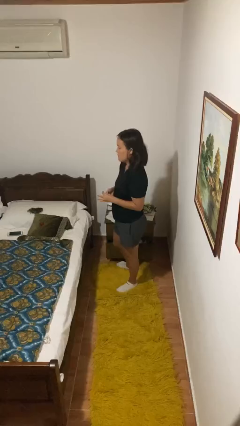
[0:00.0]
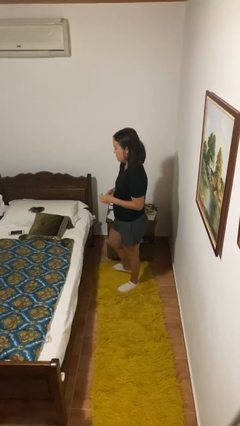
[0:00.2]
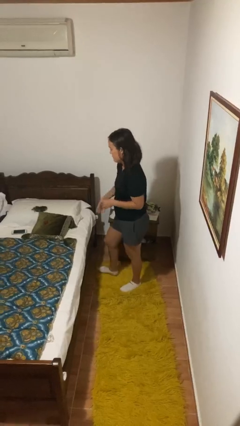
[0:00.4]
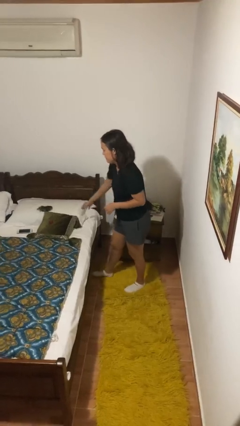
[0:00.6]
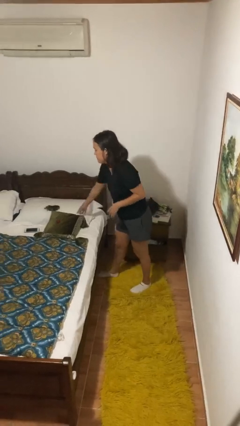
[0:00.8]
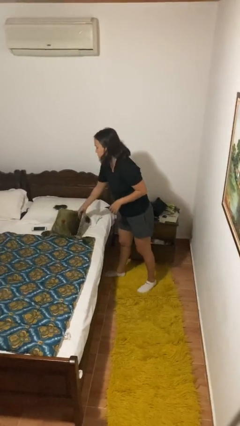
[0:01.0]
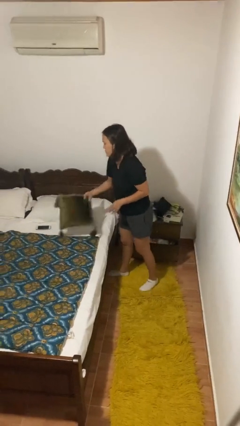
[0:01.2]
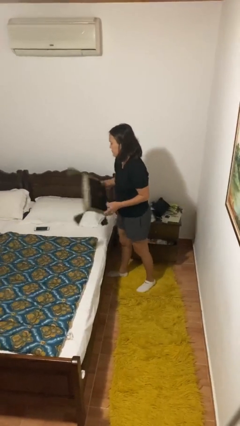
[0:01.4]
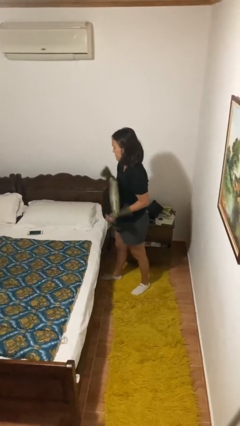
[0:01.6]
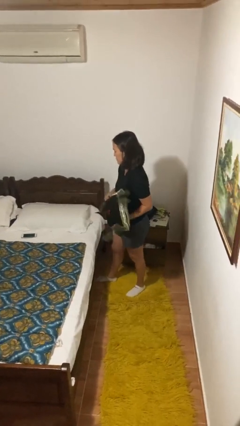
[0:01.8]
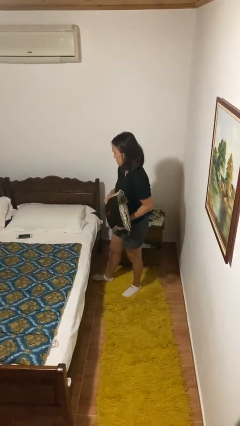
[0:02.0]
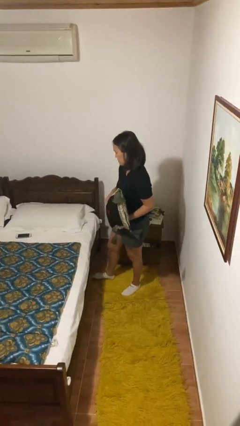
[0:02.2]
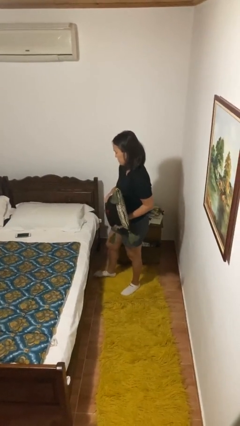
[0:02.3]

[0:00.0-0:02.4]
person picks up object from bed

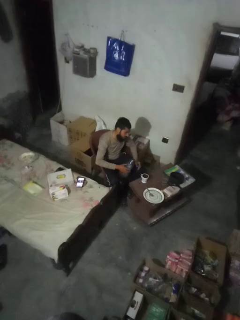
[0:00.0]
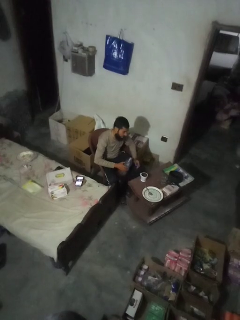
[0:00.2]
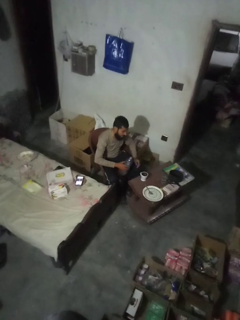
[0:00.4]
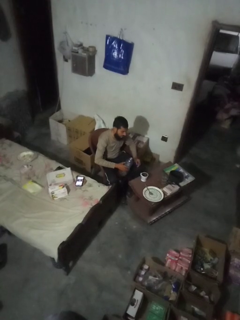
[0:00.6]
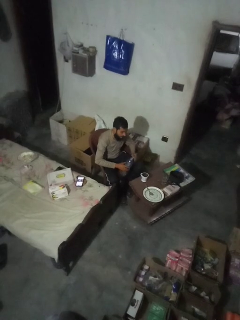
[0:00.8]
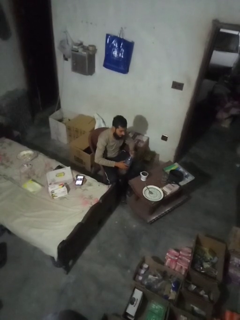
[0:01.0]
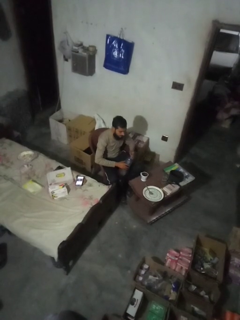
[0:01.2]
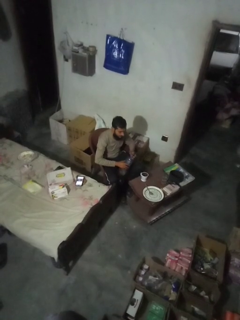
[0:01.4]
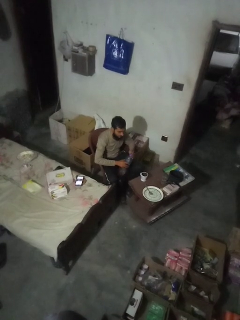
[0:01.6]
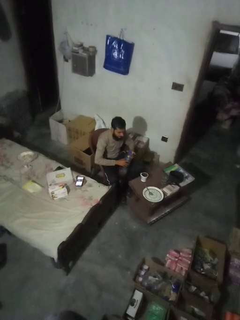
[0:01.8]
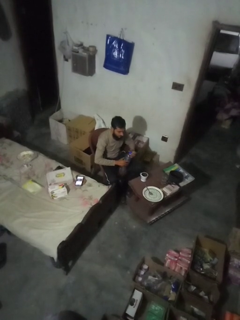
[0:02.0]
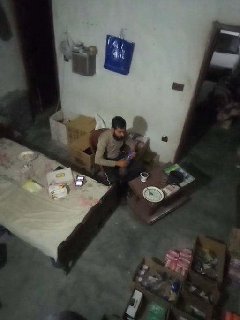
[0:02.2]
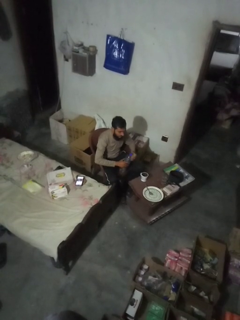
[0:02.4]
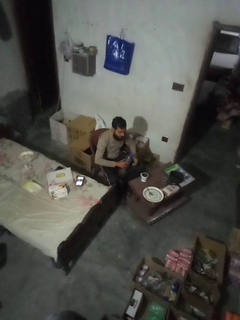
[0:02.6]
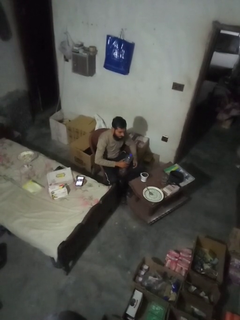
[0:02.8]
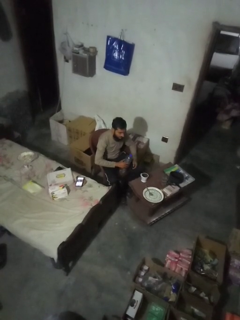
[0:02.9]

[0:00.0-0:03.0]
person screws lid to bottle

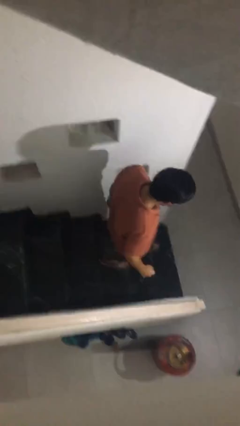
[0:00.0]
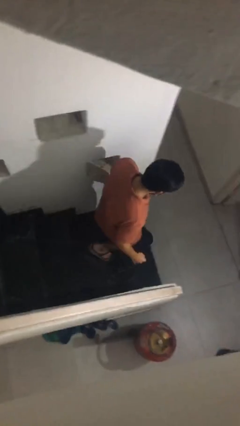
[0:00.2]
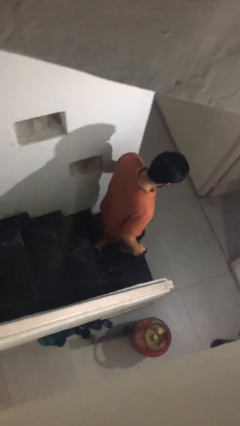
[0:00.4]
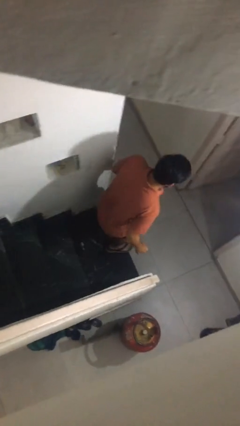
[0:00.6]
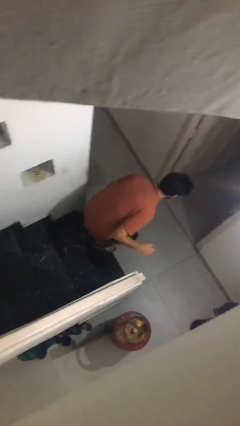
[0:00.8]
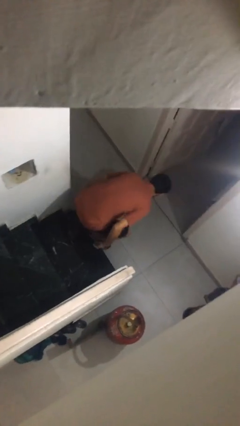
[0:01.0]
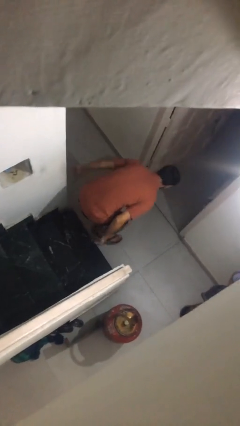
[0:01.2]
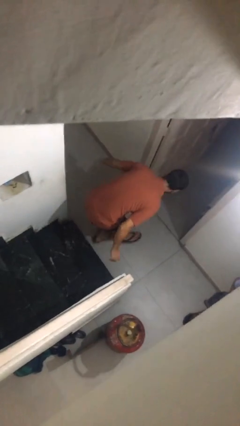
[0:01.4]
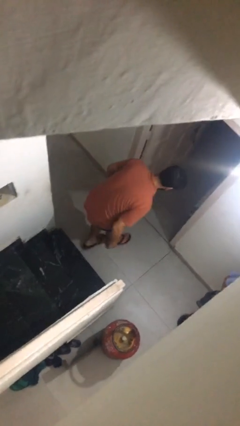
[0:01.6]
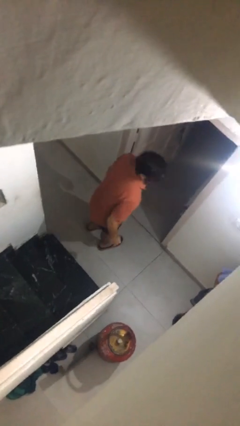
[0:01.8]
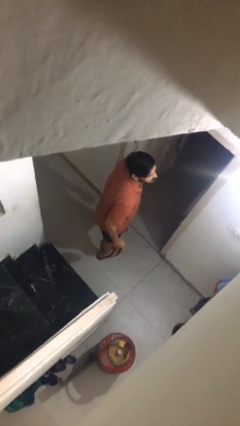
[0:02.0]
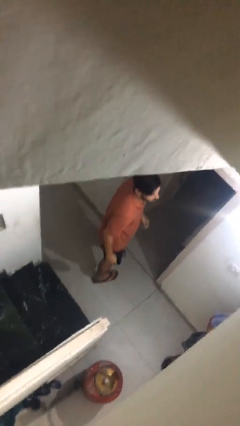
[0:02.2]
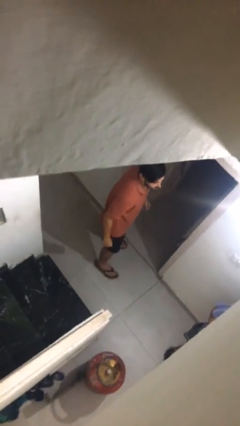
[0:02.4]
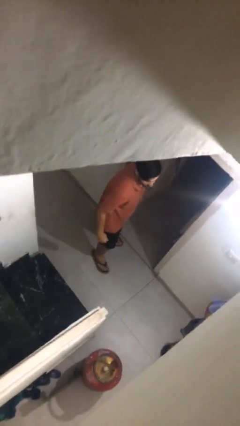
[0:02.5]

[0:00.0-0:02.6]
person trips on stair

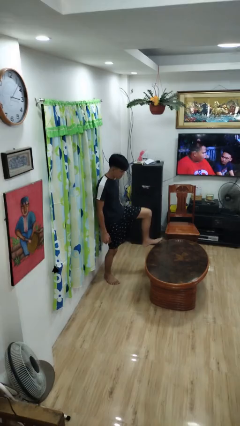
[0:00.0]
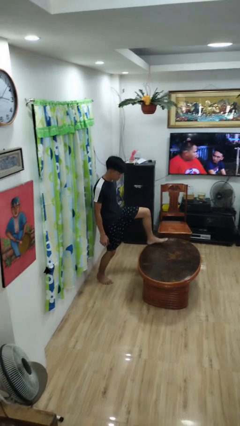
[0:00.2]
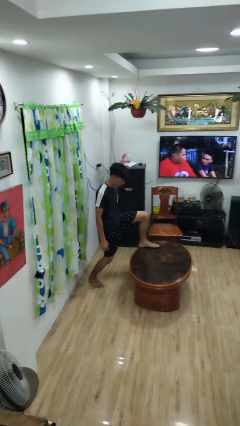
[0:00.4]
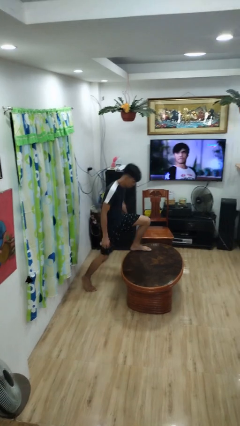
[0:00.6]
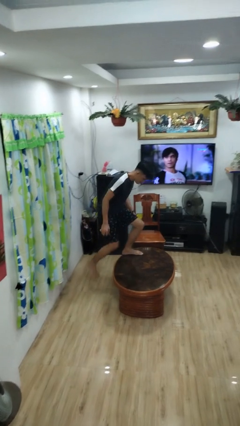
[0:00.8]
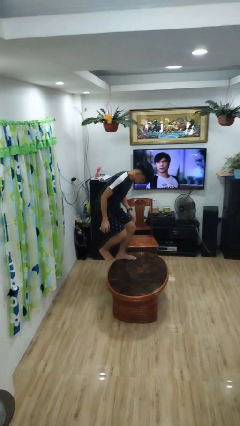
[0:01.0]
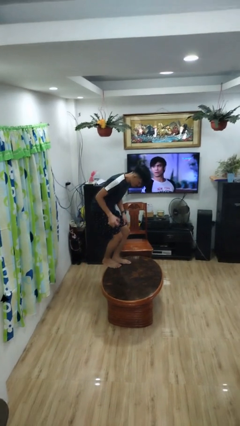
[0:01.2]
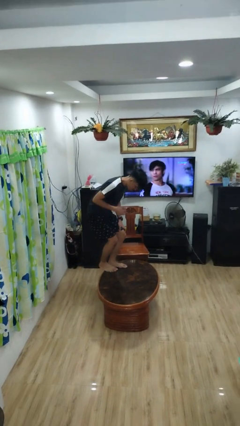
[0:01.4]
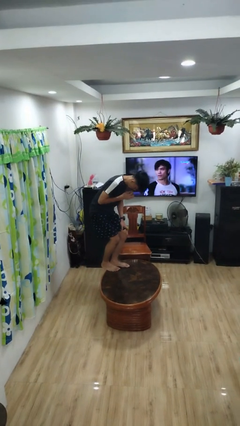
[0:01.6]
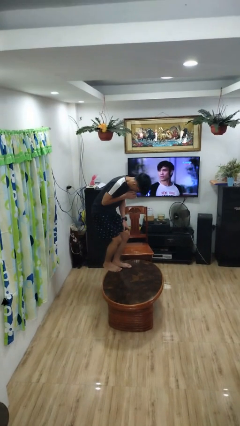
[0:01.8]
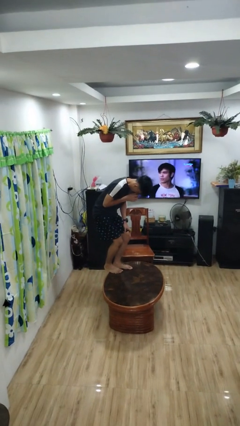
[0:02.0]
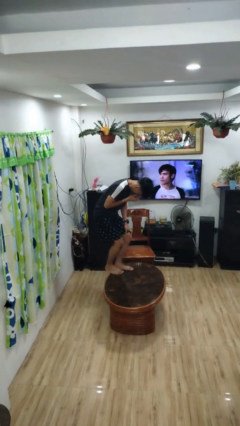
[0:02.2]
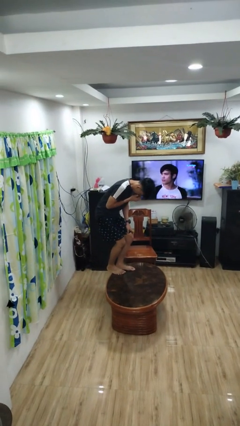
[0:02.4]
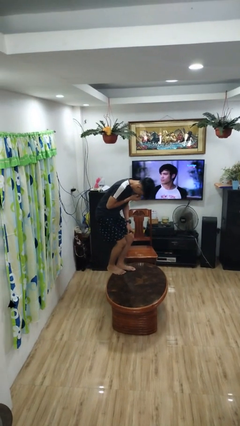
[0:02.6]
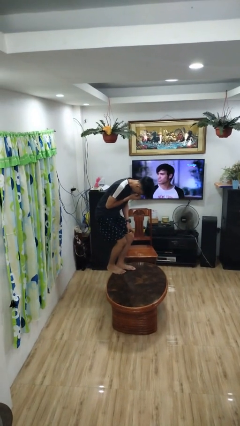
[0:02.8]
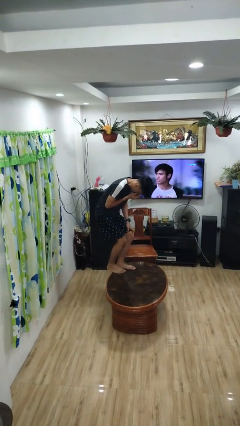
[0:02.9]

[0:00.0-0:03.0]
person climbs on table

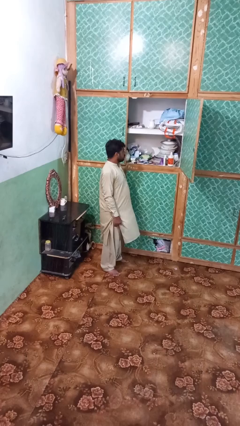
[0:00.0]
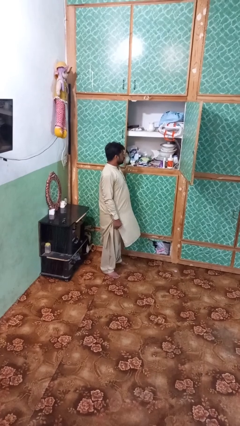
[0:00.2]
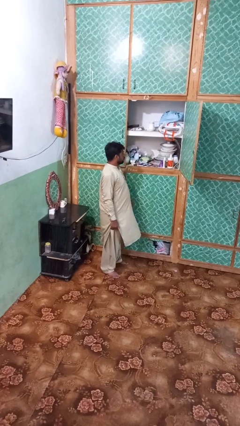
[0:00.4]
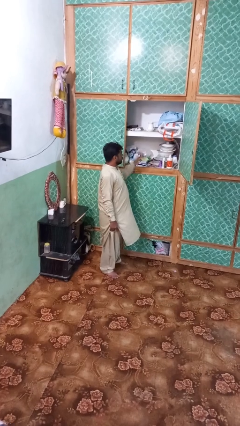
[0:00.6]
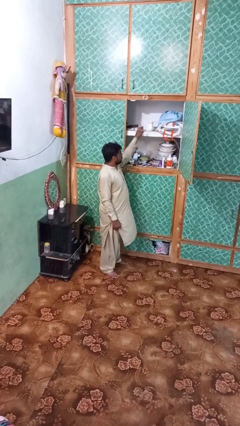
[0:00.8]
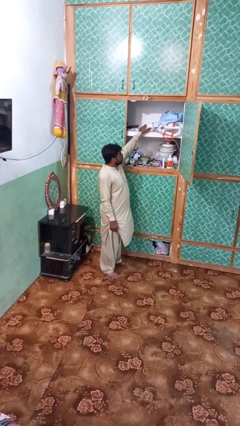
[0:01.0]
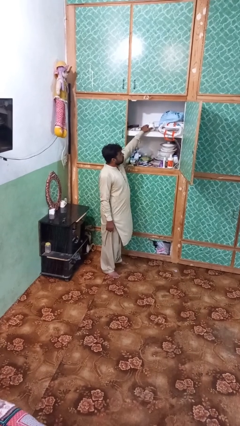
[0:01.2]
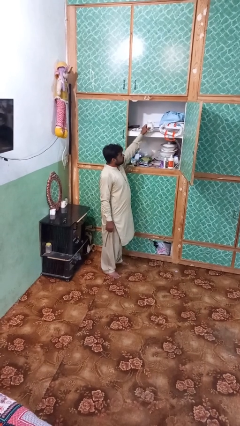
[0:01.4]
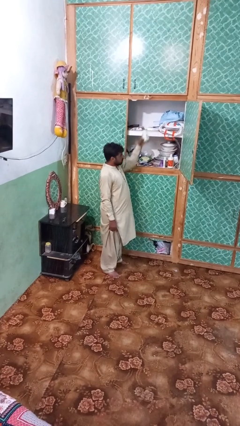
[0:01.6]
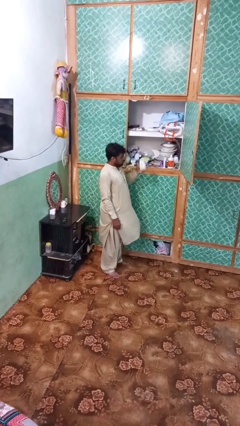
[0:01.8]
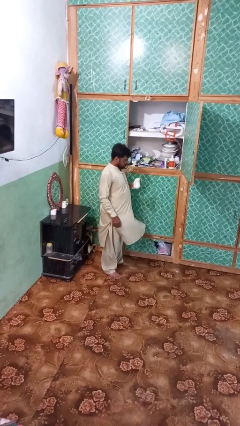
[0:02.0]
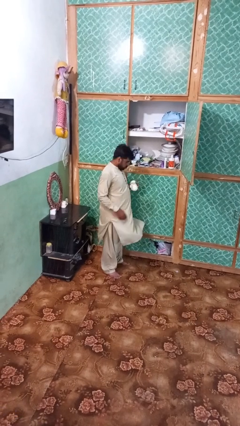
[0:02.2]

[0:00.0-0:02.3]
person picks up object from shelf

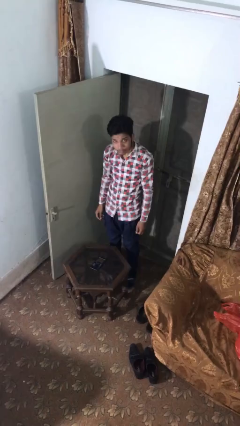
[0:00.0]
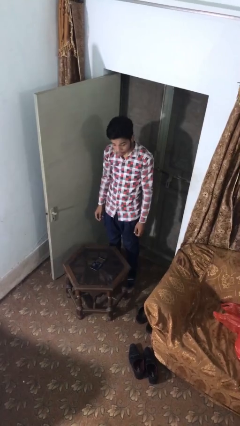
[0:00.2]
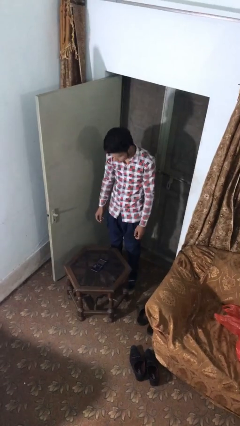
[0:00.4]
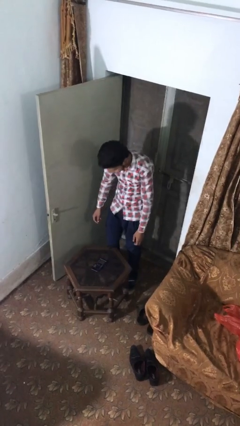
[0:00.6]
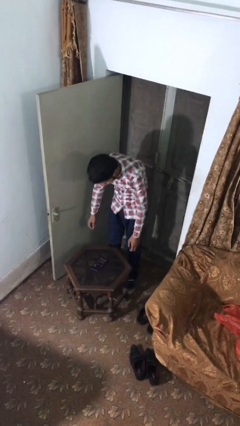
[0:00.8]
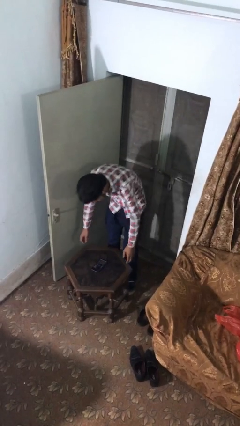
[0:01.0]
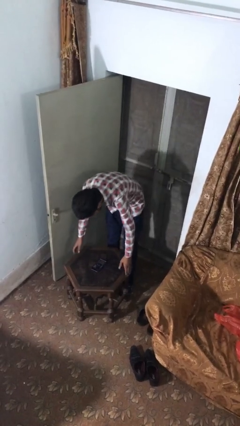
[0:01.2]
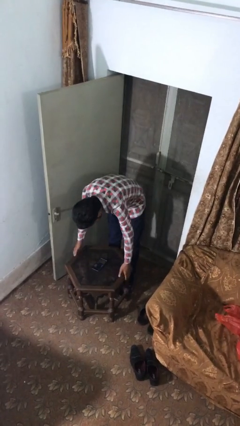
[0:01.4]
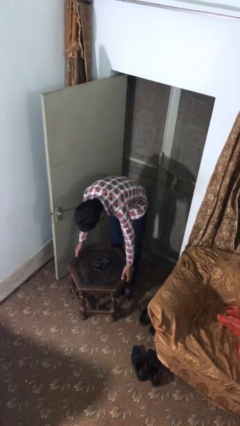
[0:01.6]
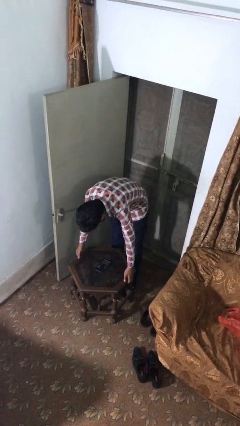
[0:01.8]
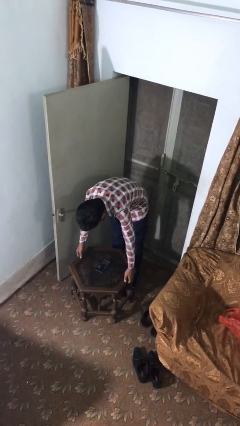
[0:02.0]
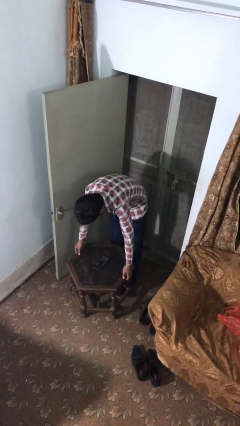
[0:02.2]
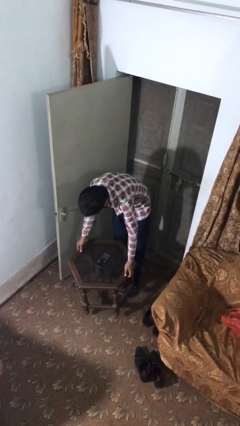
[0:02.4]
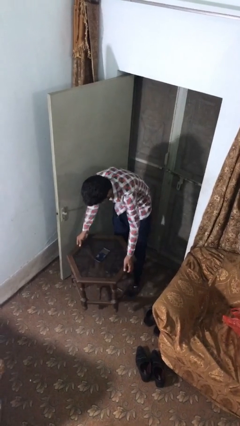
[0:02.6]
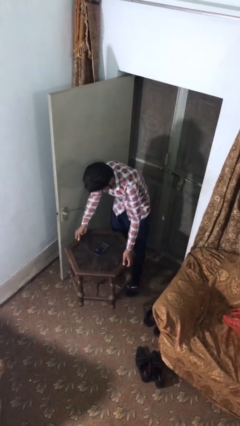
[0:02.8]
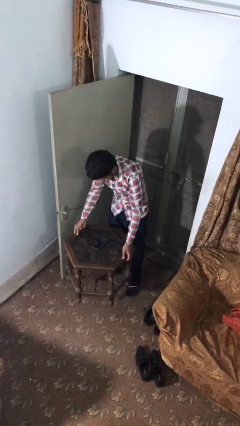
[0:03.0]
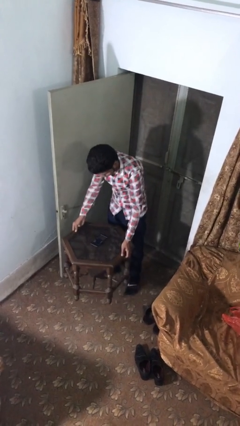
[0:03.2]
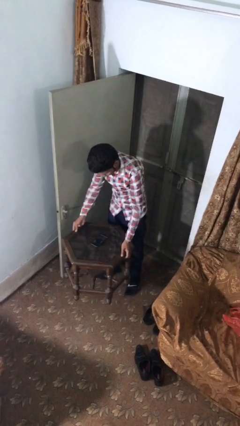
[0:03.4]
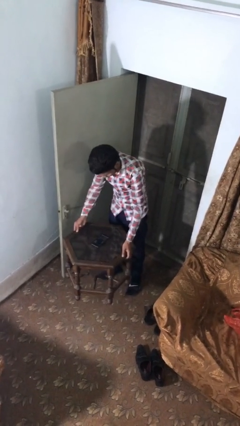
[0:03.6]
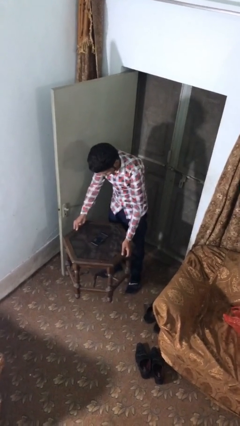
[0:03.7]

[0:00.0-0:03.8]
person picks up object from floor

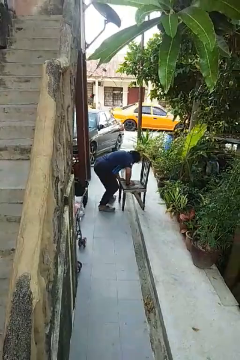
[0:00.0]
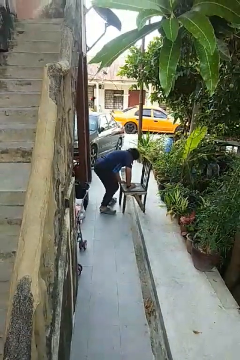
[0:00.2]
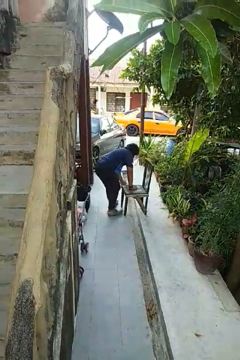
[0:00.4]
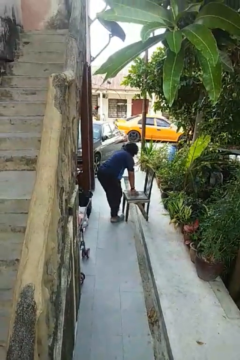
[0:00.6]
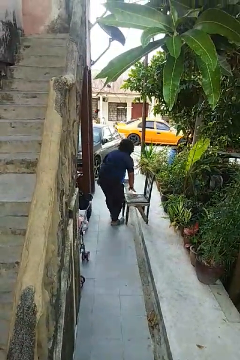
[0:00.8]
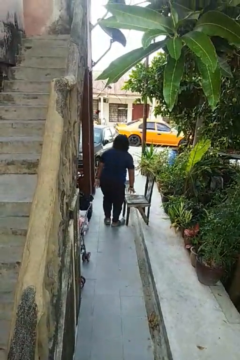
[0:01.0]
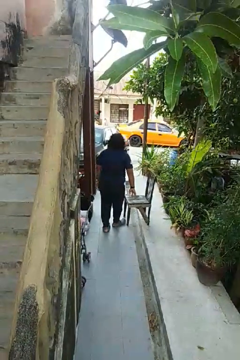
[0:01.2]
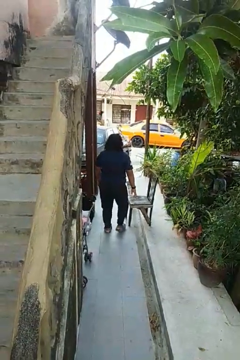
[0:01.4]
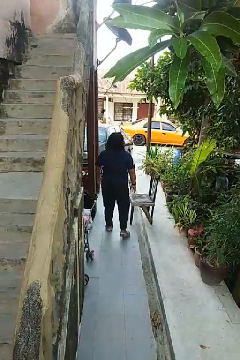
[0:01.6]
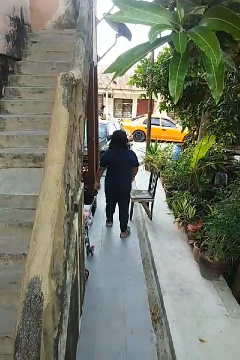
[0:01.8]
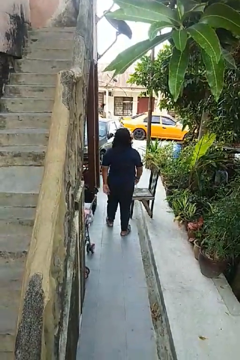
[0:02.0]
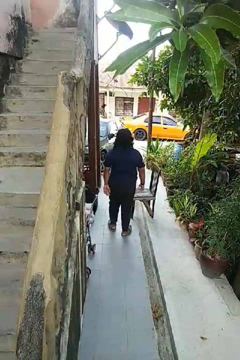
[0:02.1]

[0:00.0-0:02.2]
person stands up from floor
